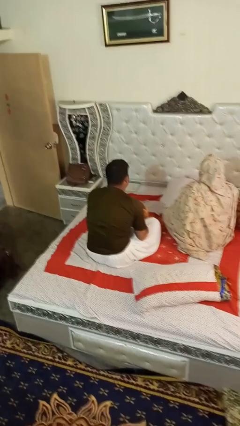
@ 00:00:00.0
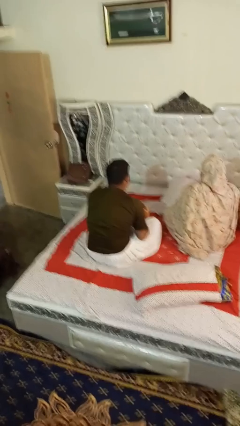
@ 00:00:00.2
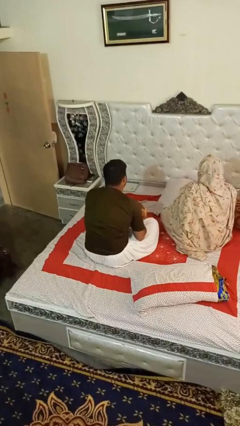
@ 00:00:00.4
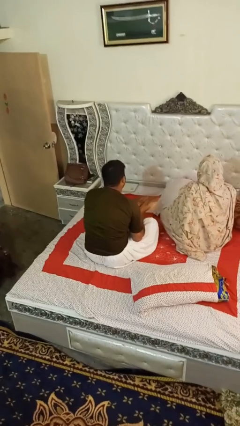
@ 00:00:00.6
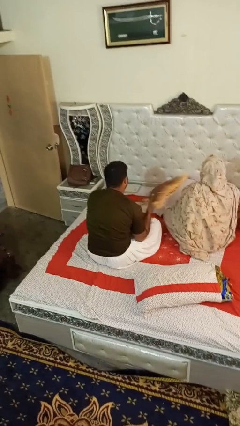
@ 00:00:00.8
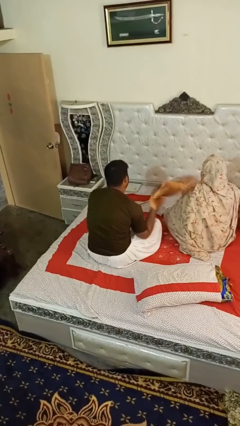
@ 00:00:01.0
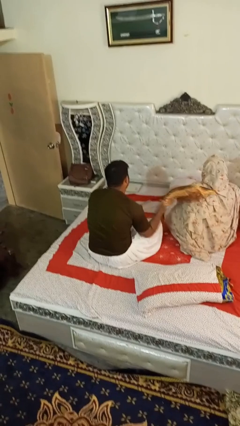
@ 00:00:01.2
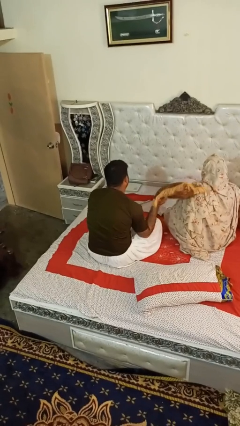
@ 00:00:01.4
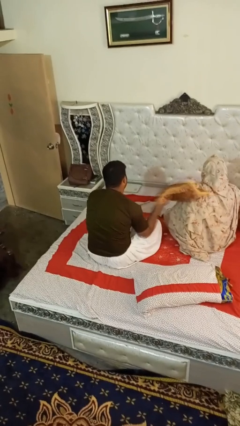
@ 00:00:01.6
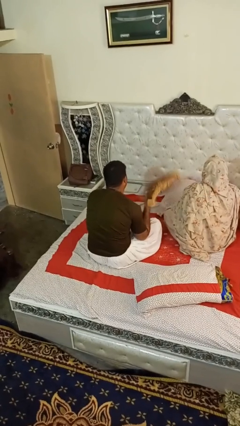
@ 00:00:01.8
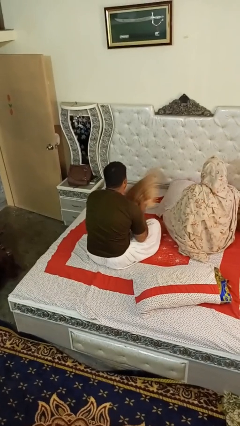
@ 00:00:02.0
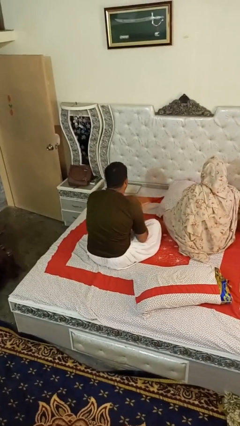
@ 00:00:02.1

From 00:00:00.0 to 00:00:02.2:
person hits person with pillow

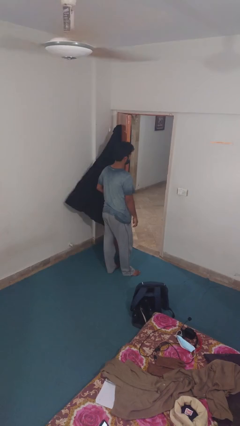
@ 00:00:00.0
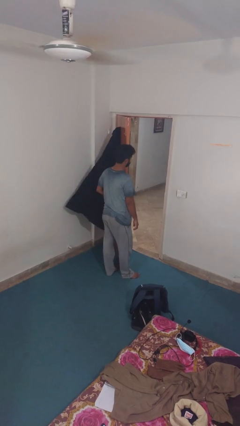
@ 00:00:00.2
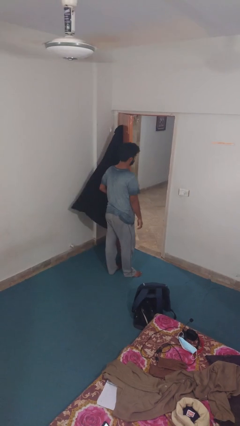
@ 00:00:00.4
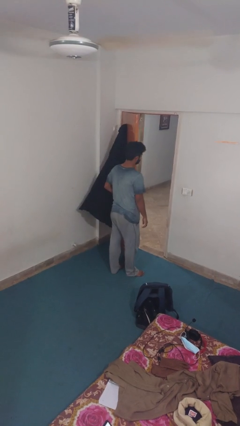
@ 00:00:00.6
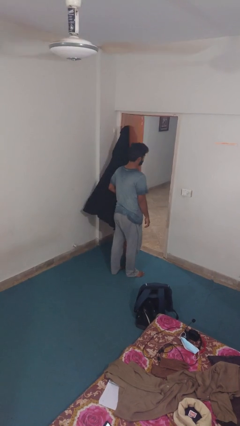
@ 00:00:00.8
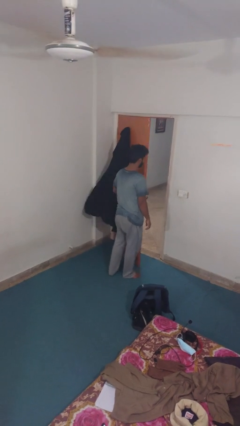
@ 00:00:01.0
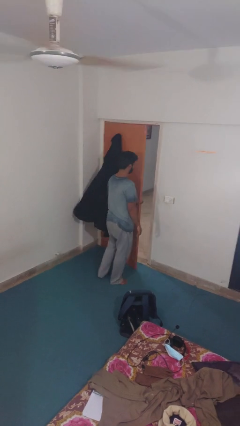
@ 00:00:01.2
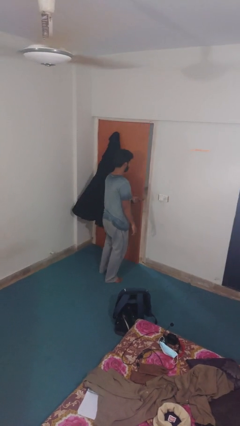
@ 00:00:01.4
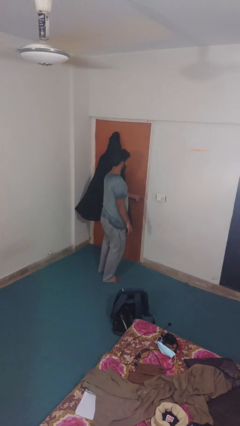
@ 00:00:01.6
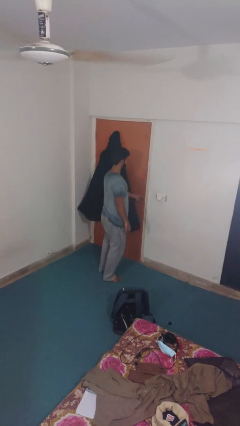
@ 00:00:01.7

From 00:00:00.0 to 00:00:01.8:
person closes facility door

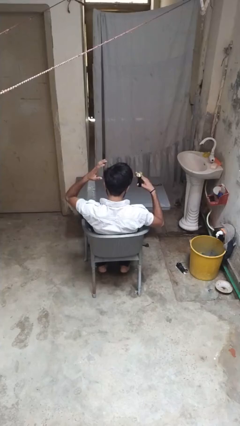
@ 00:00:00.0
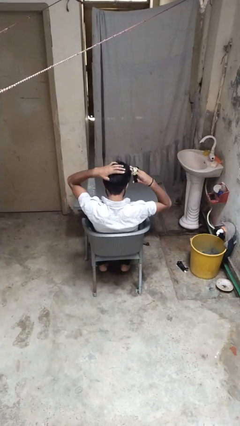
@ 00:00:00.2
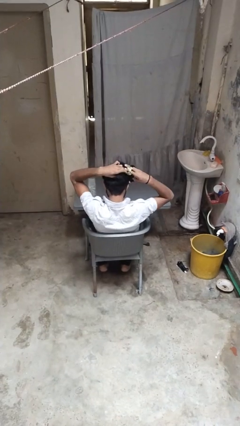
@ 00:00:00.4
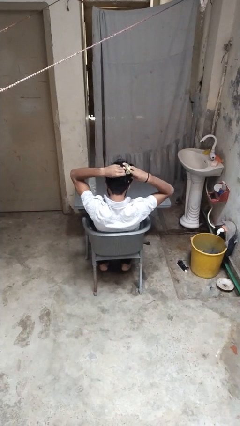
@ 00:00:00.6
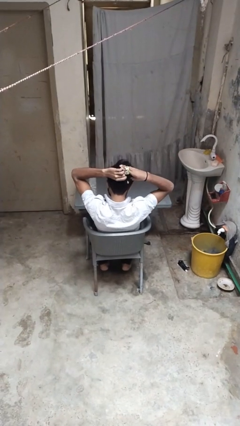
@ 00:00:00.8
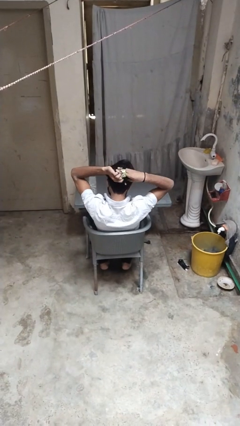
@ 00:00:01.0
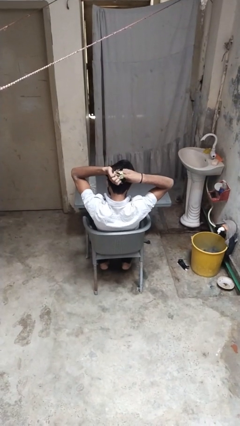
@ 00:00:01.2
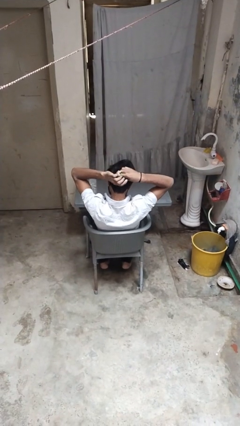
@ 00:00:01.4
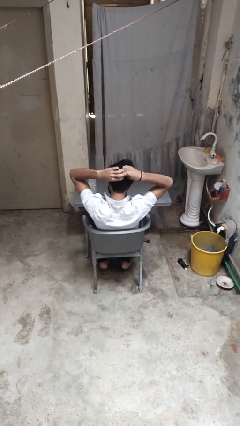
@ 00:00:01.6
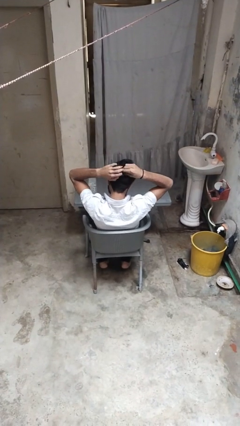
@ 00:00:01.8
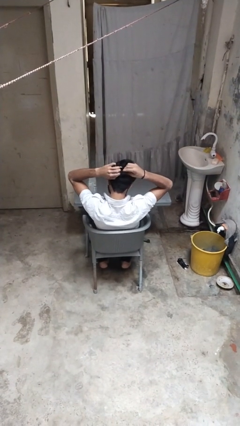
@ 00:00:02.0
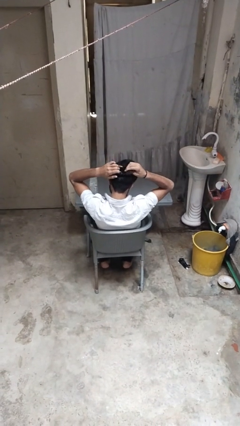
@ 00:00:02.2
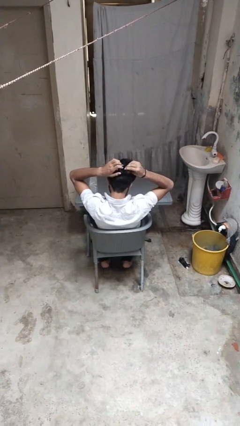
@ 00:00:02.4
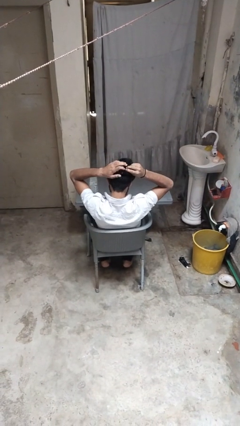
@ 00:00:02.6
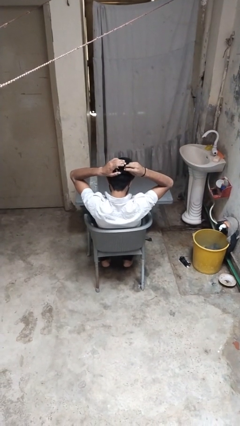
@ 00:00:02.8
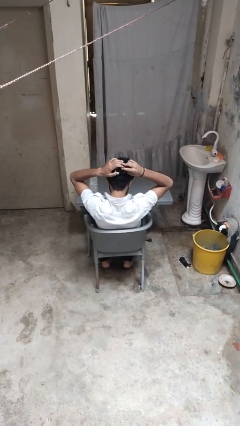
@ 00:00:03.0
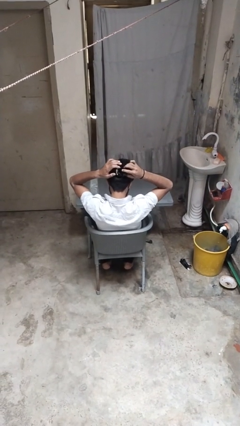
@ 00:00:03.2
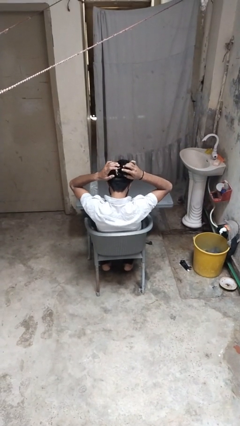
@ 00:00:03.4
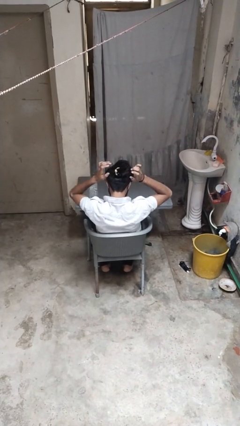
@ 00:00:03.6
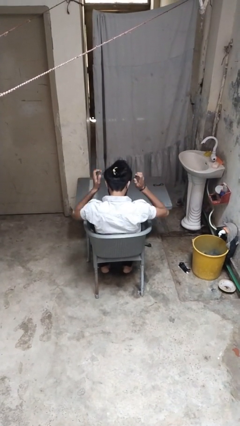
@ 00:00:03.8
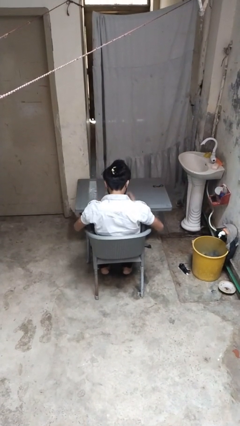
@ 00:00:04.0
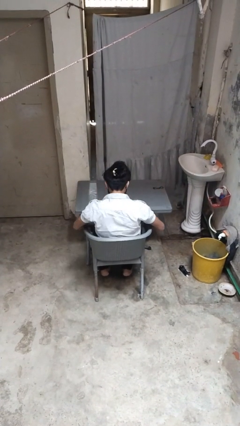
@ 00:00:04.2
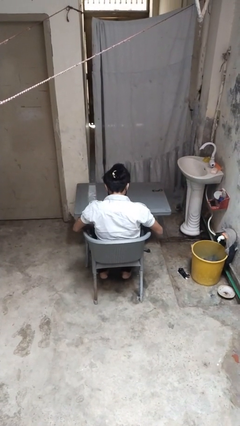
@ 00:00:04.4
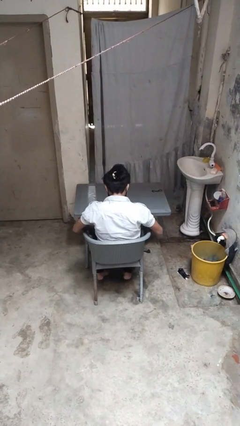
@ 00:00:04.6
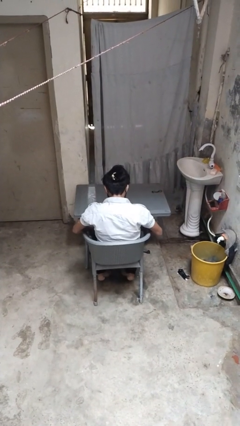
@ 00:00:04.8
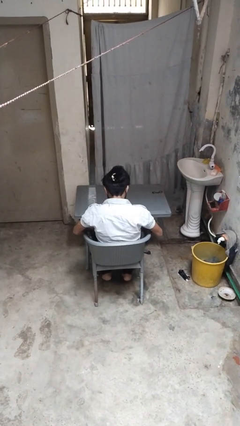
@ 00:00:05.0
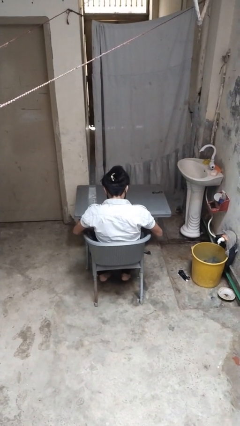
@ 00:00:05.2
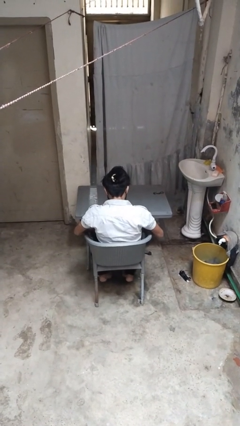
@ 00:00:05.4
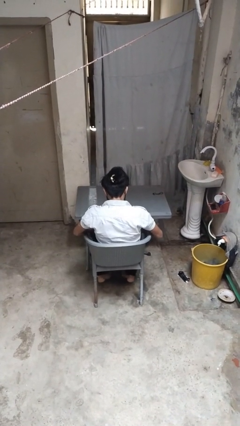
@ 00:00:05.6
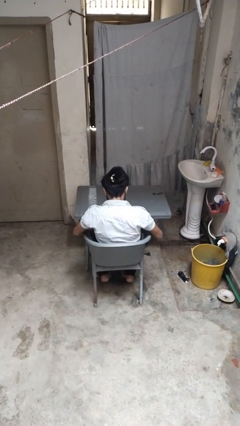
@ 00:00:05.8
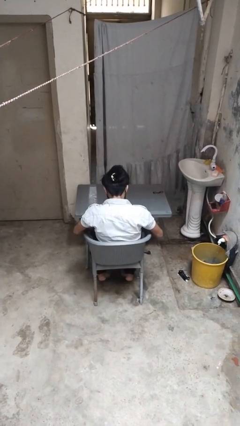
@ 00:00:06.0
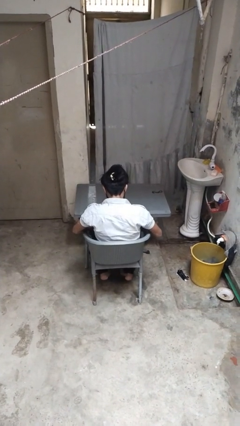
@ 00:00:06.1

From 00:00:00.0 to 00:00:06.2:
person puts hair in ponytail

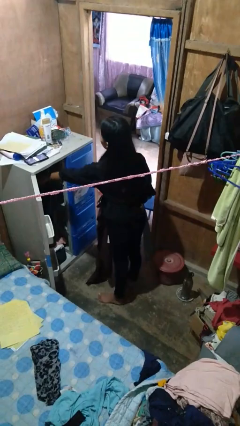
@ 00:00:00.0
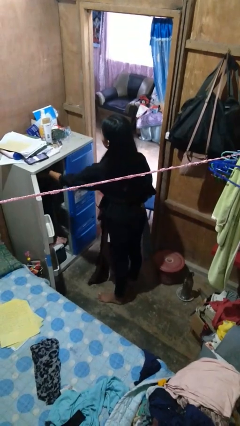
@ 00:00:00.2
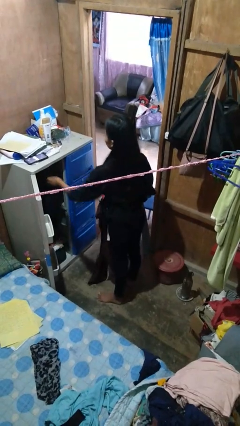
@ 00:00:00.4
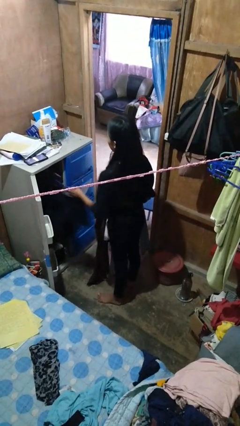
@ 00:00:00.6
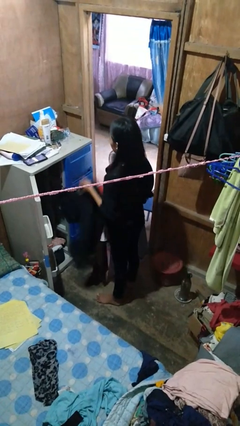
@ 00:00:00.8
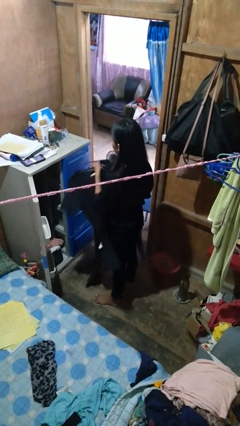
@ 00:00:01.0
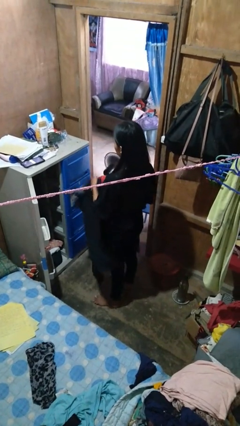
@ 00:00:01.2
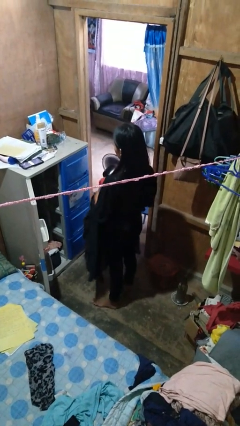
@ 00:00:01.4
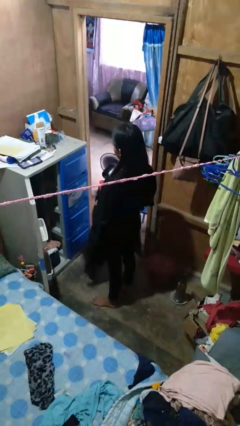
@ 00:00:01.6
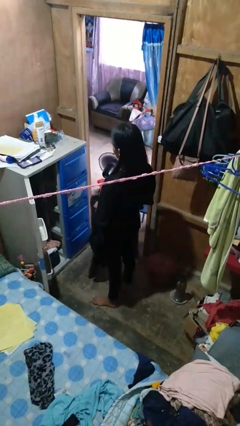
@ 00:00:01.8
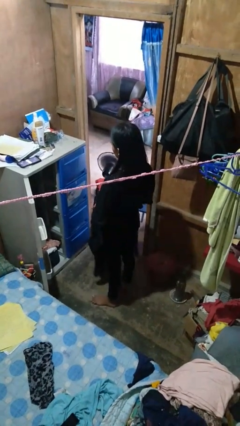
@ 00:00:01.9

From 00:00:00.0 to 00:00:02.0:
person takes clothes from closet

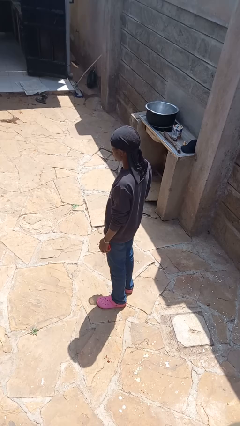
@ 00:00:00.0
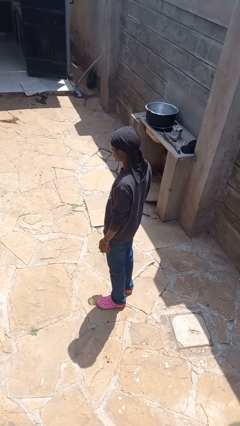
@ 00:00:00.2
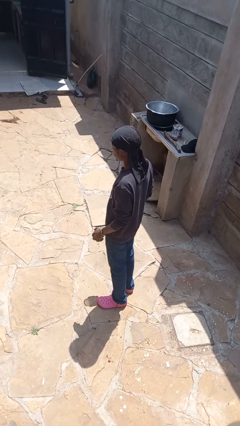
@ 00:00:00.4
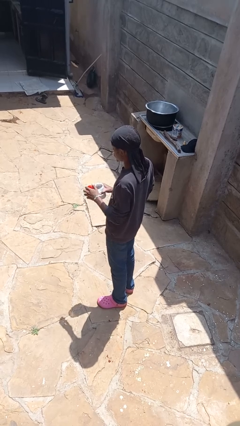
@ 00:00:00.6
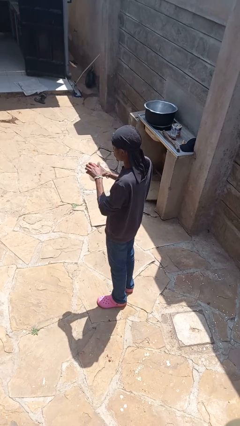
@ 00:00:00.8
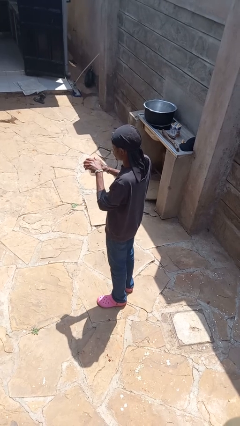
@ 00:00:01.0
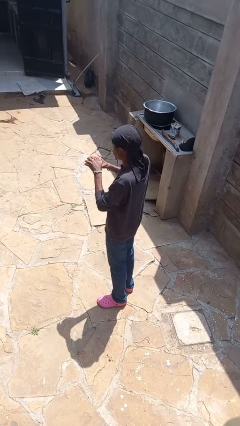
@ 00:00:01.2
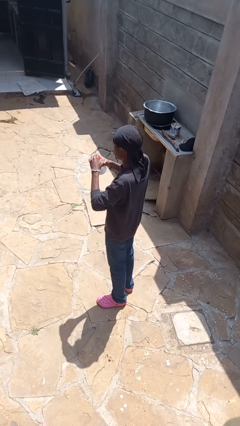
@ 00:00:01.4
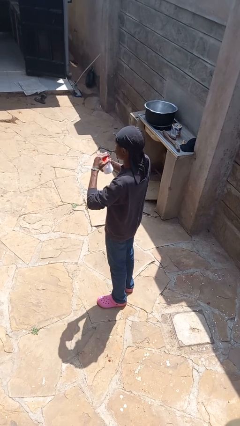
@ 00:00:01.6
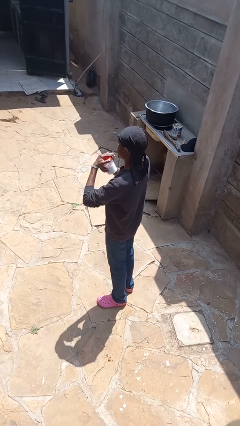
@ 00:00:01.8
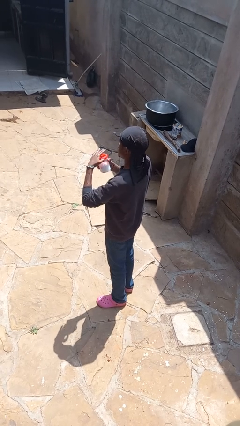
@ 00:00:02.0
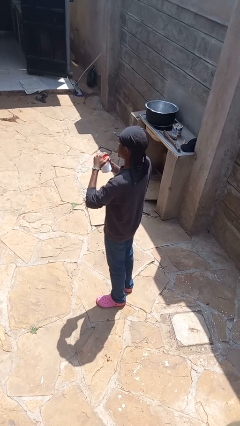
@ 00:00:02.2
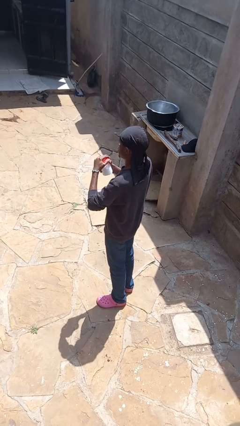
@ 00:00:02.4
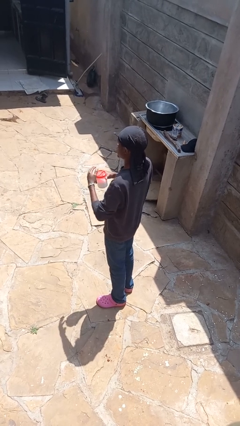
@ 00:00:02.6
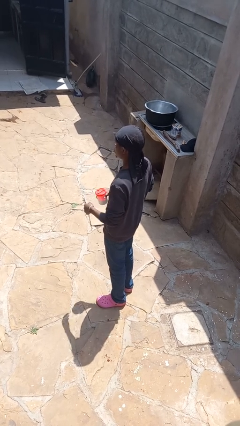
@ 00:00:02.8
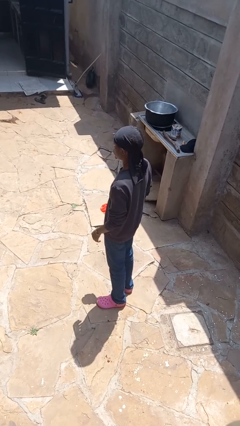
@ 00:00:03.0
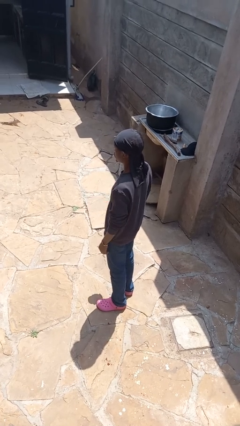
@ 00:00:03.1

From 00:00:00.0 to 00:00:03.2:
person closes jar

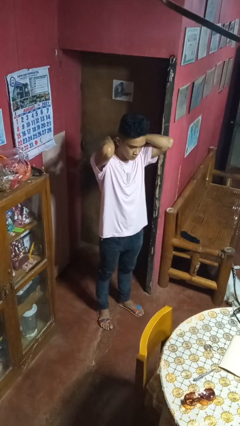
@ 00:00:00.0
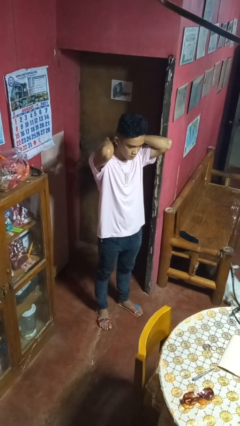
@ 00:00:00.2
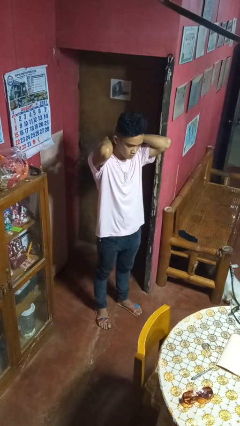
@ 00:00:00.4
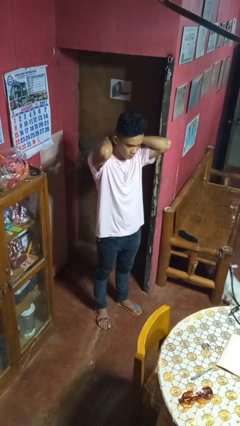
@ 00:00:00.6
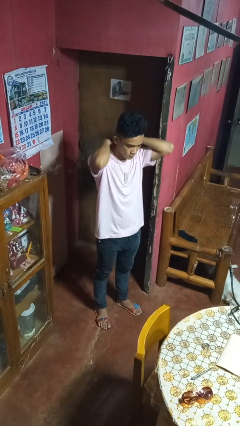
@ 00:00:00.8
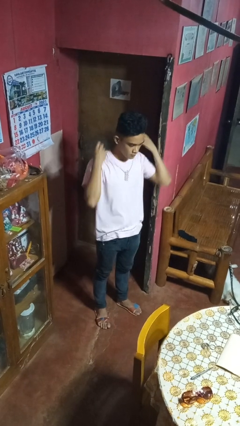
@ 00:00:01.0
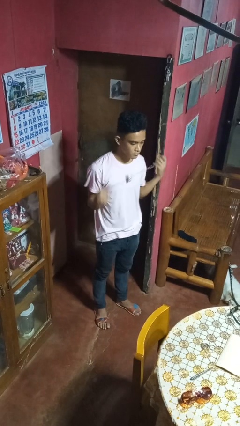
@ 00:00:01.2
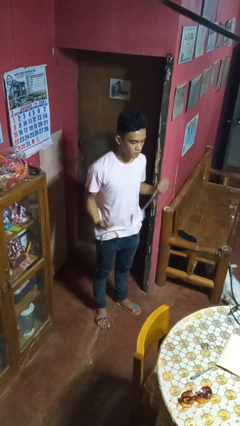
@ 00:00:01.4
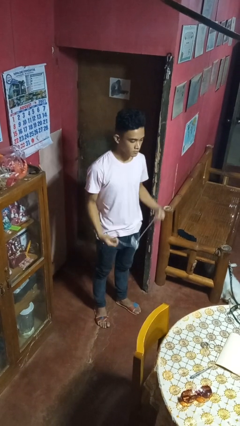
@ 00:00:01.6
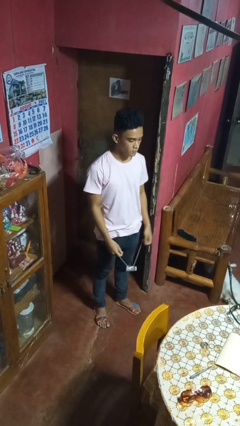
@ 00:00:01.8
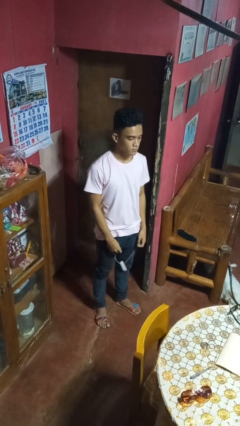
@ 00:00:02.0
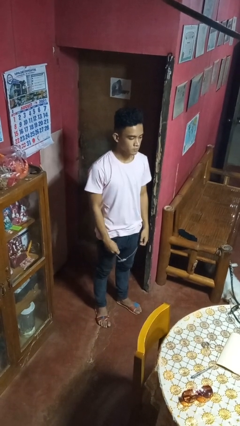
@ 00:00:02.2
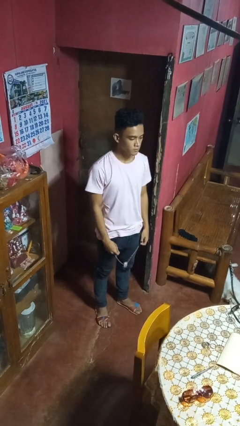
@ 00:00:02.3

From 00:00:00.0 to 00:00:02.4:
person takes off necklace
